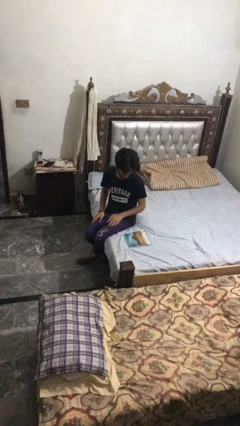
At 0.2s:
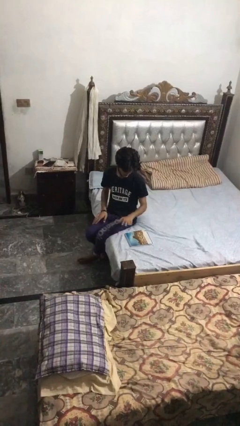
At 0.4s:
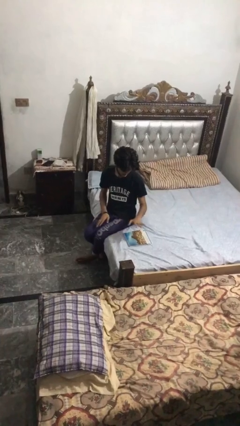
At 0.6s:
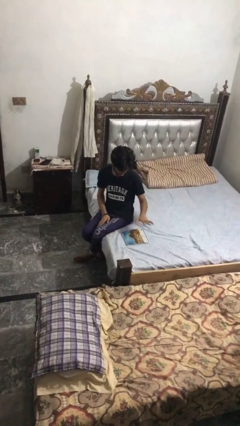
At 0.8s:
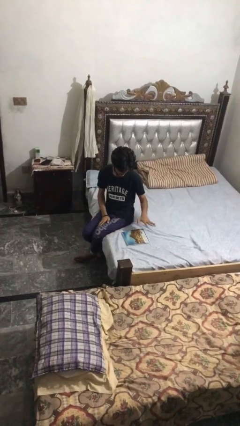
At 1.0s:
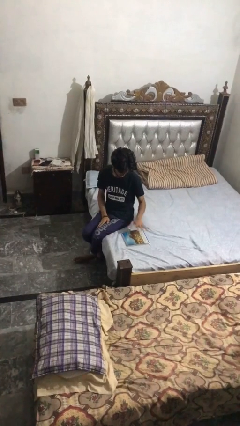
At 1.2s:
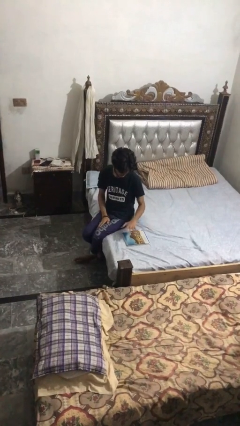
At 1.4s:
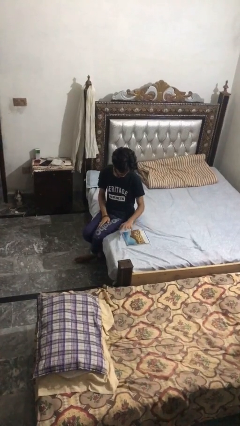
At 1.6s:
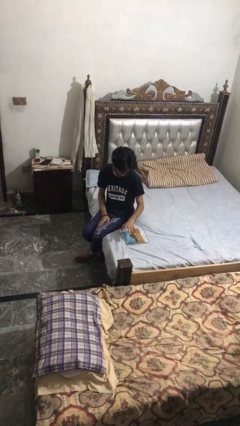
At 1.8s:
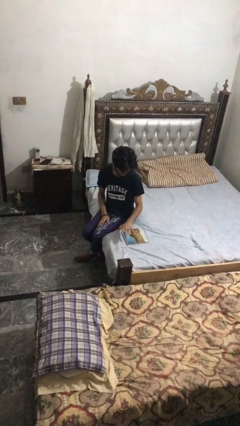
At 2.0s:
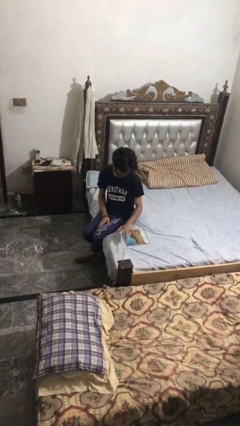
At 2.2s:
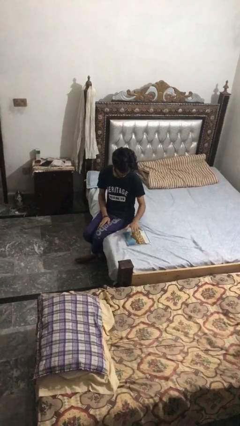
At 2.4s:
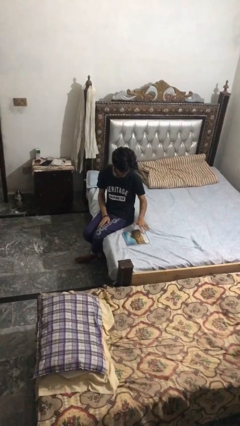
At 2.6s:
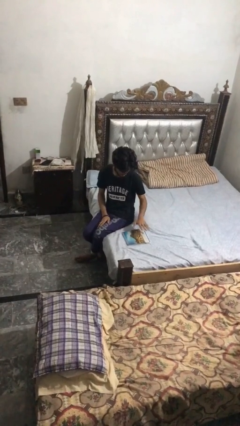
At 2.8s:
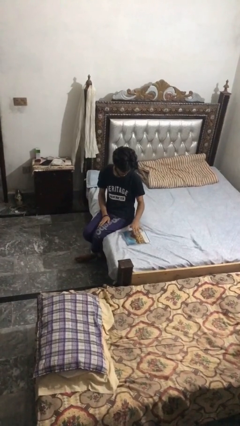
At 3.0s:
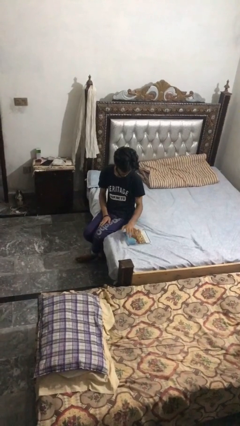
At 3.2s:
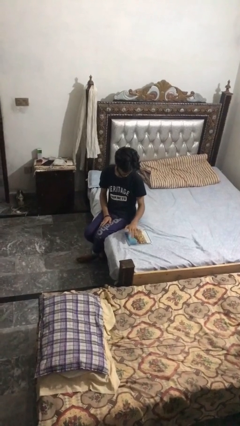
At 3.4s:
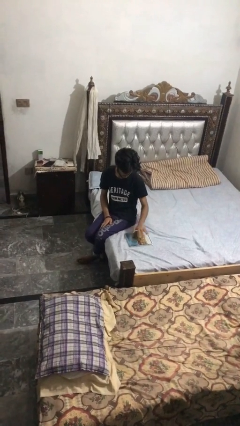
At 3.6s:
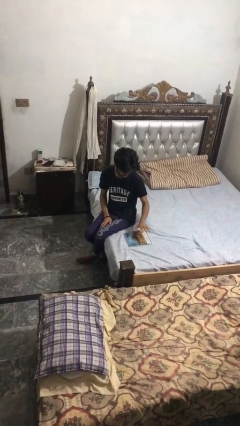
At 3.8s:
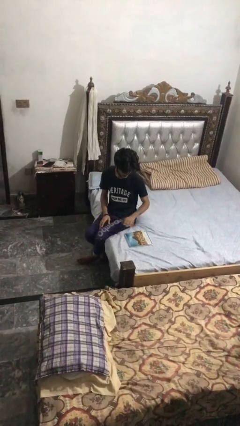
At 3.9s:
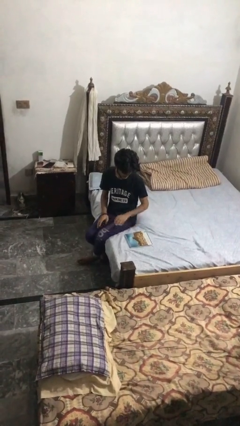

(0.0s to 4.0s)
person waves hand over object

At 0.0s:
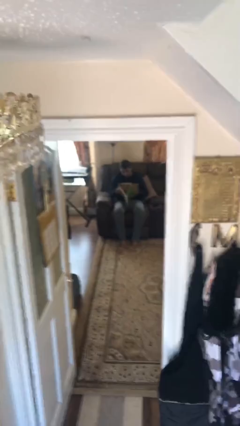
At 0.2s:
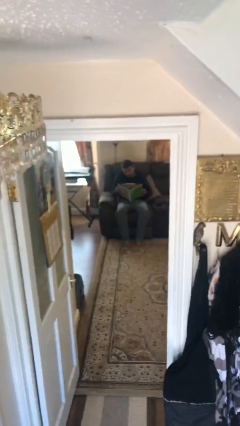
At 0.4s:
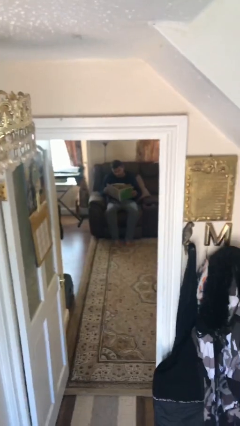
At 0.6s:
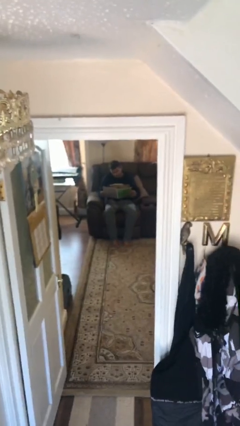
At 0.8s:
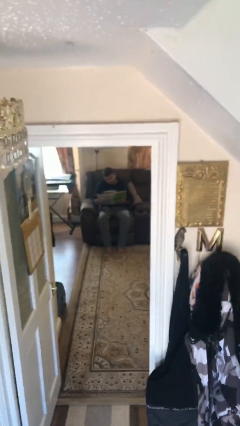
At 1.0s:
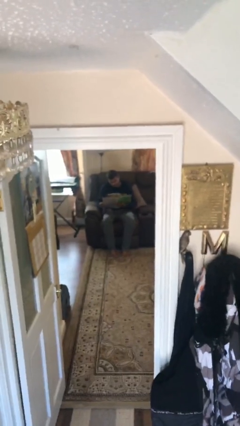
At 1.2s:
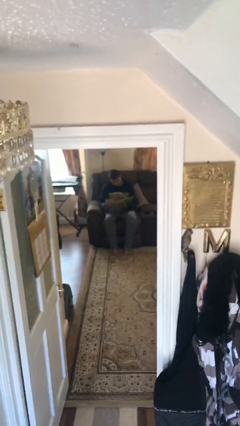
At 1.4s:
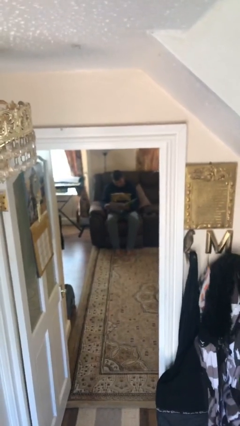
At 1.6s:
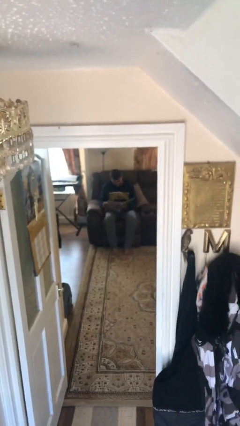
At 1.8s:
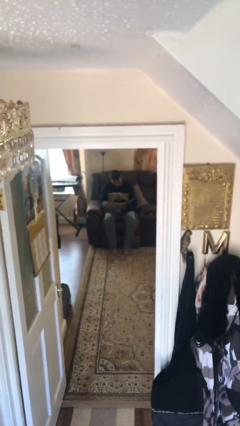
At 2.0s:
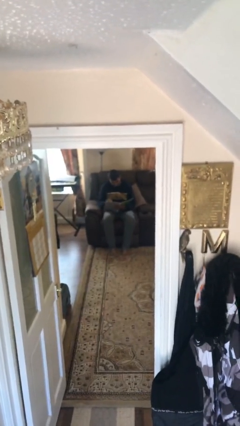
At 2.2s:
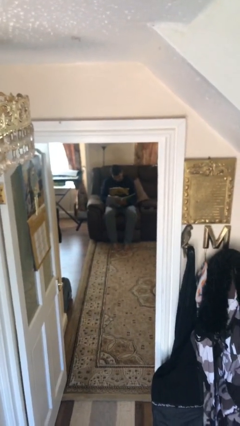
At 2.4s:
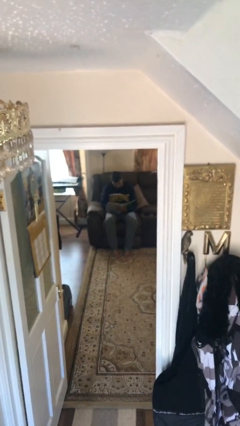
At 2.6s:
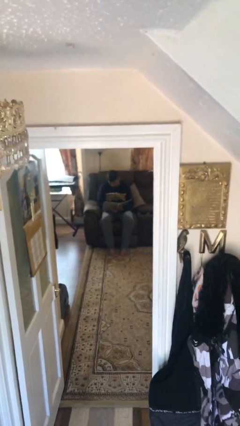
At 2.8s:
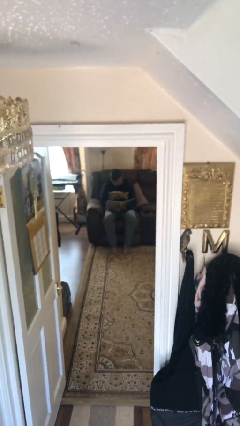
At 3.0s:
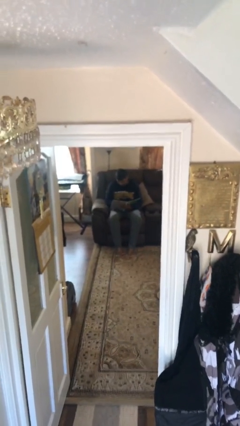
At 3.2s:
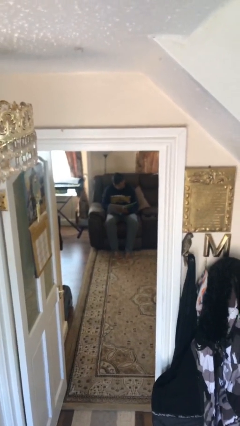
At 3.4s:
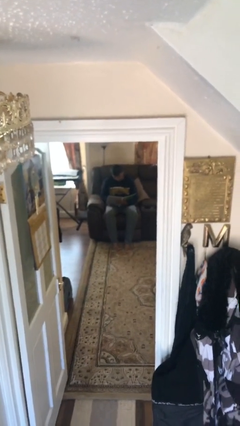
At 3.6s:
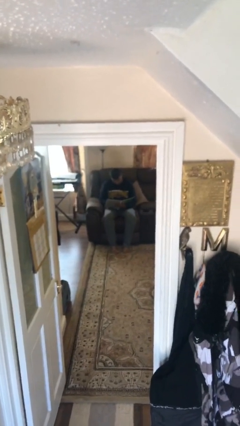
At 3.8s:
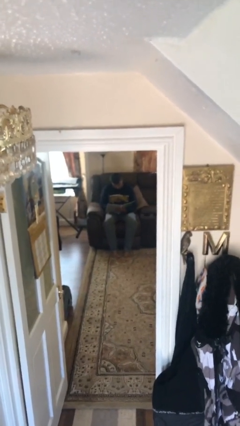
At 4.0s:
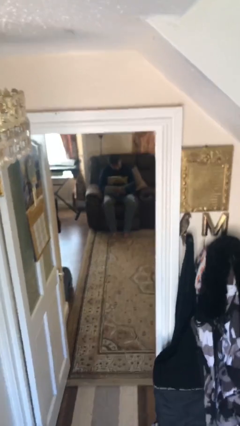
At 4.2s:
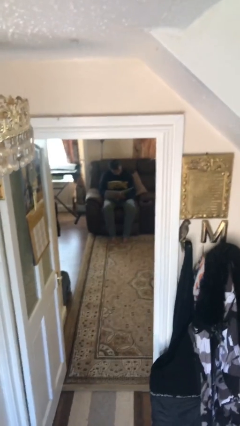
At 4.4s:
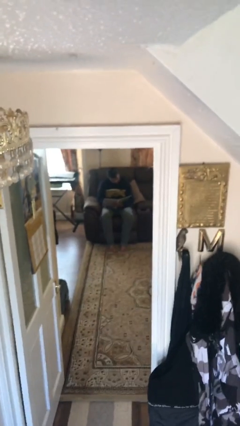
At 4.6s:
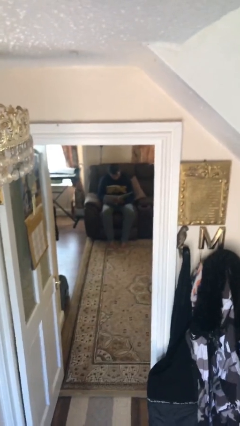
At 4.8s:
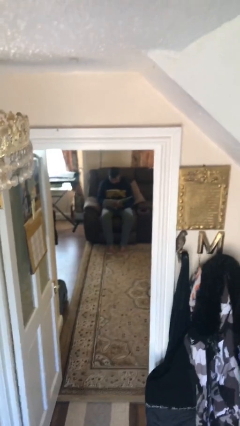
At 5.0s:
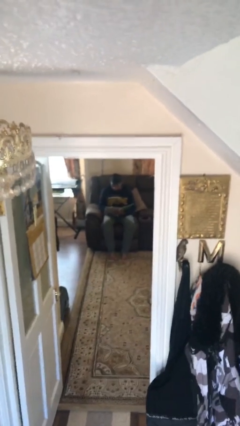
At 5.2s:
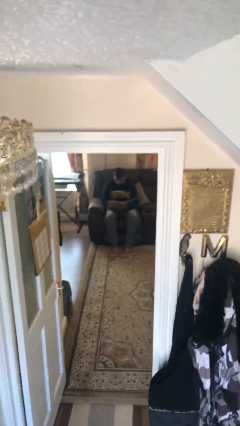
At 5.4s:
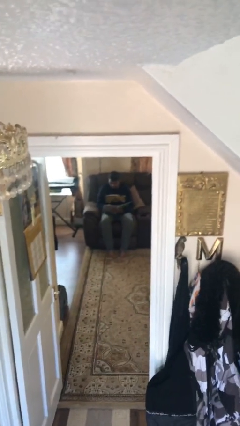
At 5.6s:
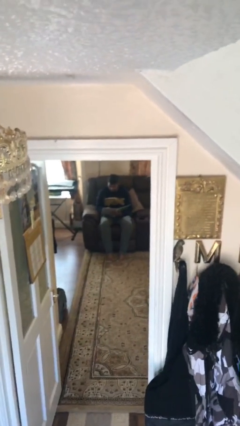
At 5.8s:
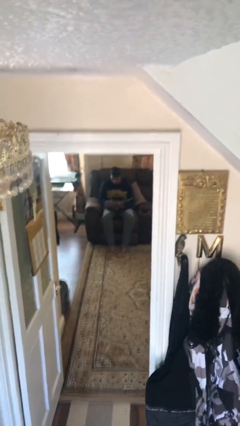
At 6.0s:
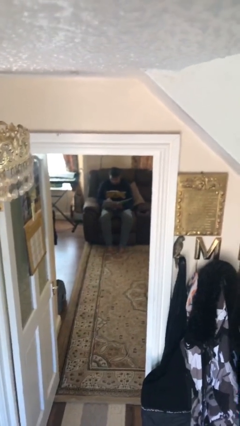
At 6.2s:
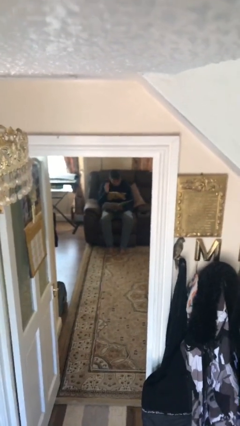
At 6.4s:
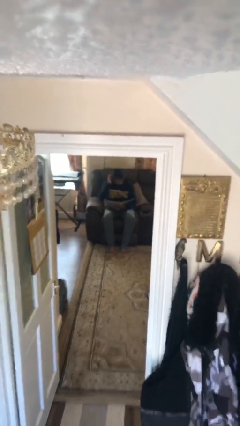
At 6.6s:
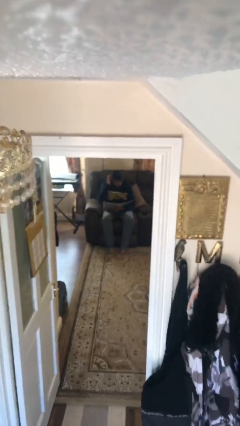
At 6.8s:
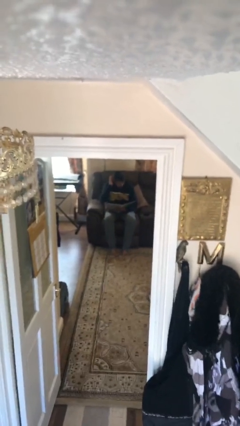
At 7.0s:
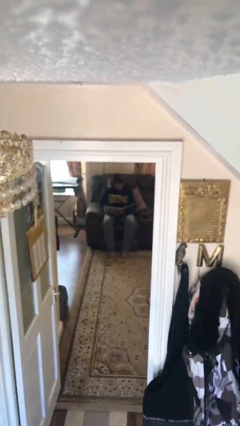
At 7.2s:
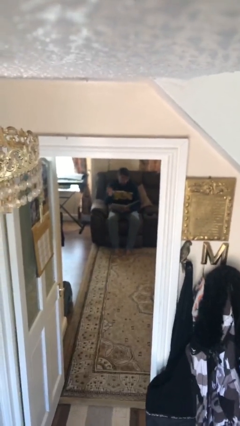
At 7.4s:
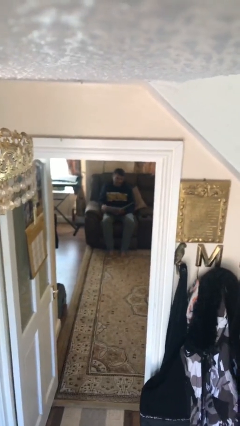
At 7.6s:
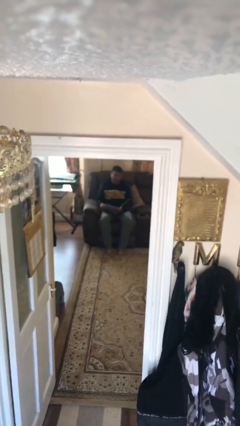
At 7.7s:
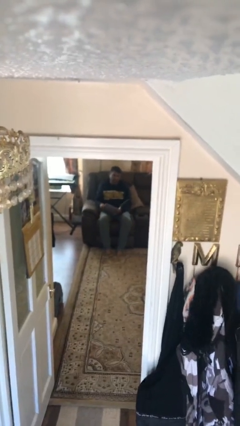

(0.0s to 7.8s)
person reads document

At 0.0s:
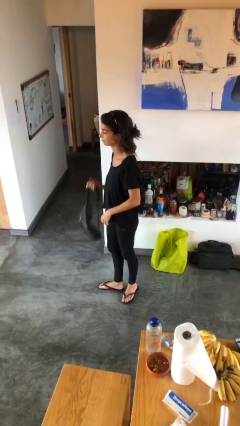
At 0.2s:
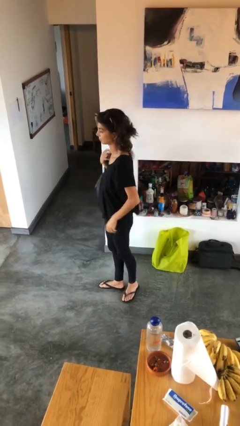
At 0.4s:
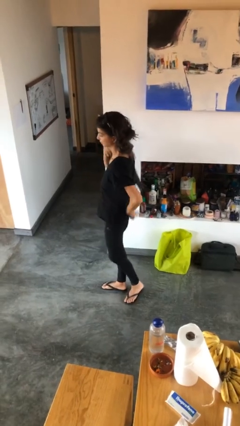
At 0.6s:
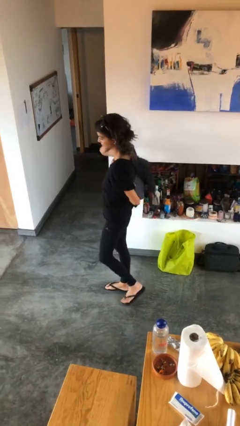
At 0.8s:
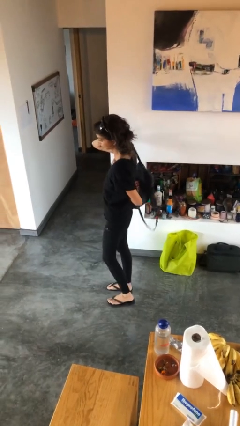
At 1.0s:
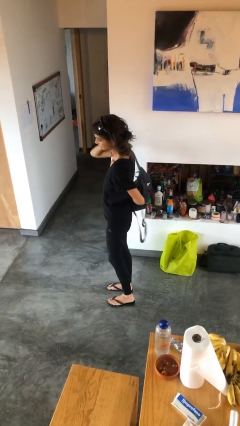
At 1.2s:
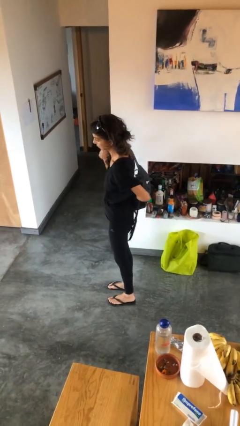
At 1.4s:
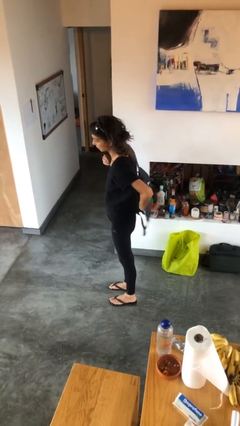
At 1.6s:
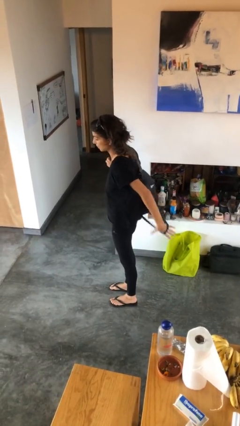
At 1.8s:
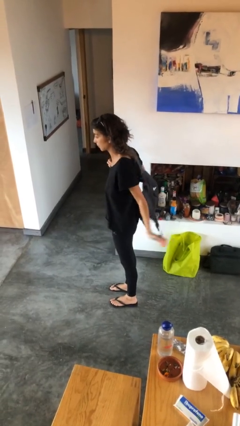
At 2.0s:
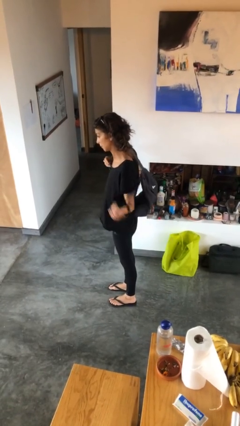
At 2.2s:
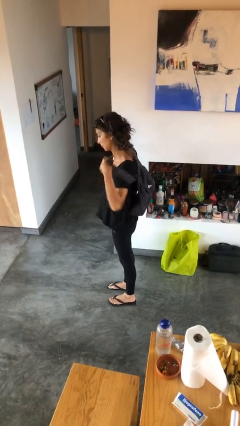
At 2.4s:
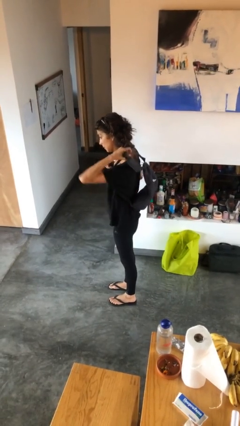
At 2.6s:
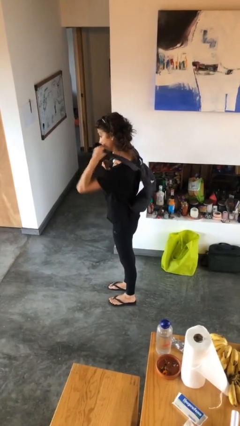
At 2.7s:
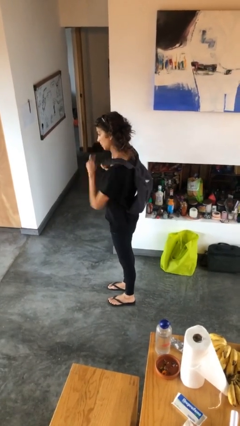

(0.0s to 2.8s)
person puts on backpack

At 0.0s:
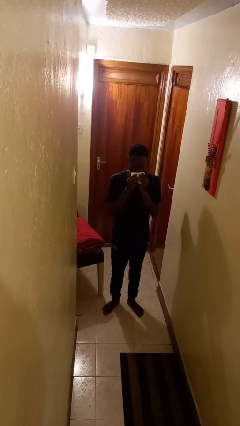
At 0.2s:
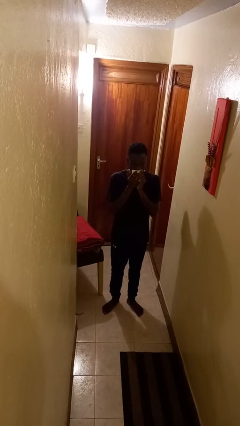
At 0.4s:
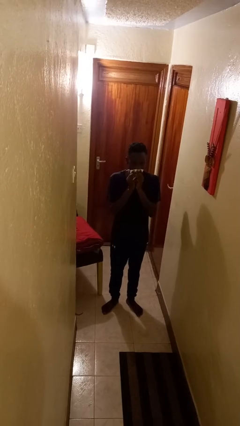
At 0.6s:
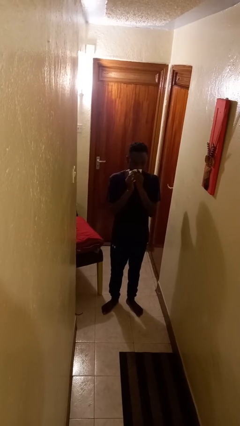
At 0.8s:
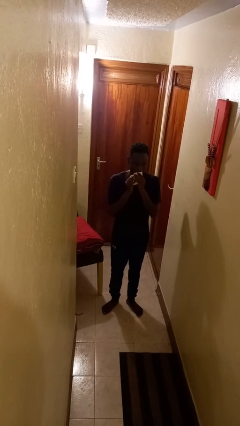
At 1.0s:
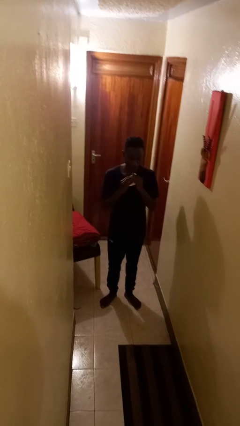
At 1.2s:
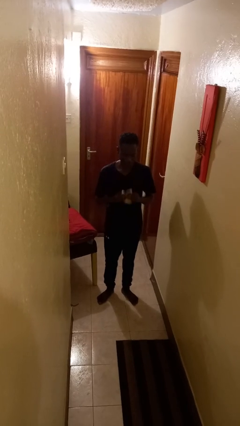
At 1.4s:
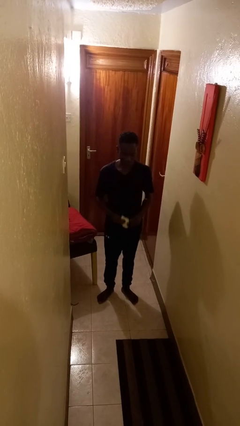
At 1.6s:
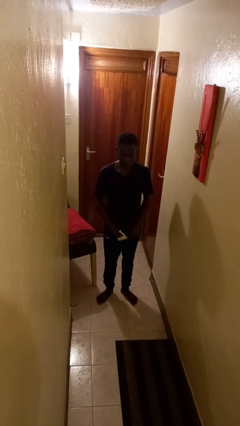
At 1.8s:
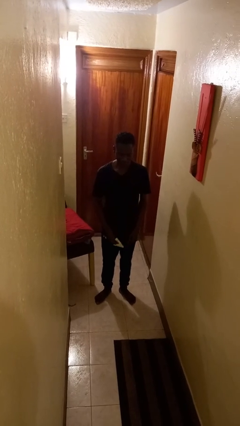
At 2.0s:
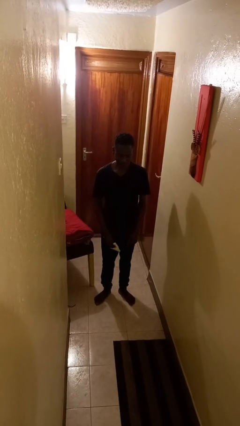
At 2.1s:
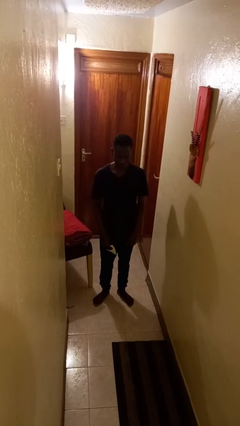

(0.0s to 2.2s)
person wipes mouth with napkin

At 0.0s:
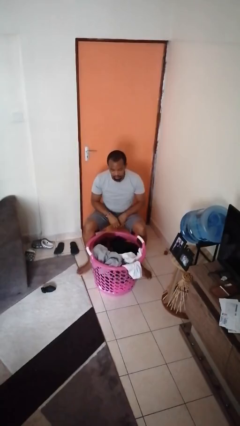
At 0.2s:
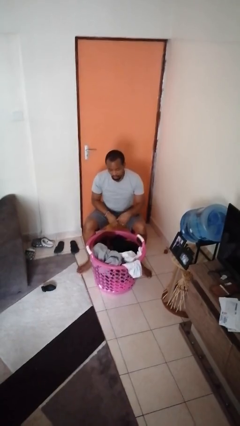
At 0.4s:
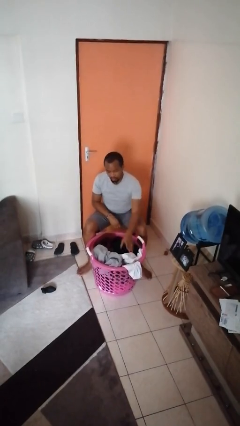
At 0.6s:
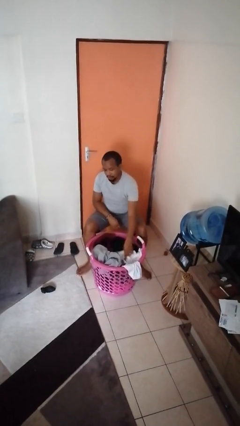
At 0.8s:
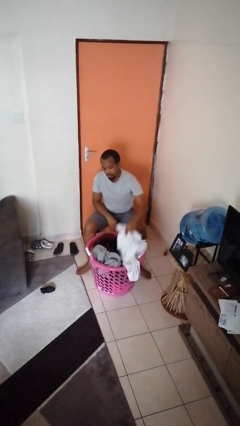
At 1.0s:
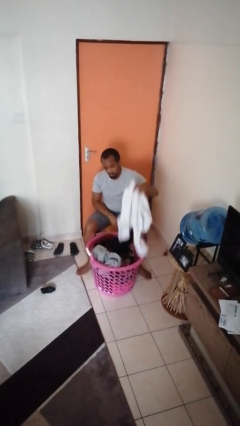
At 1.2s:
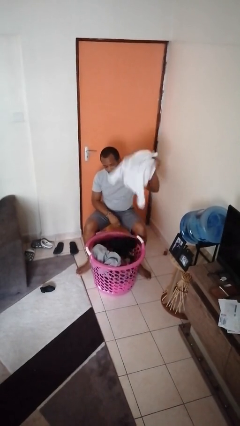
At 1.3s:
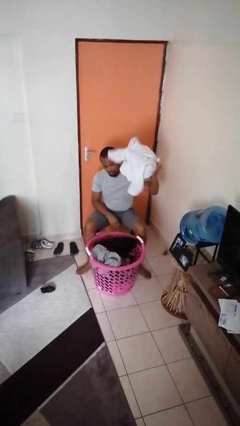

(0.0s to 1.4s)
person takes object from basket
